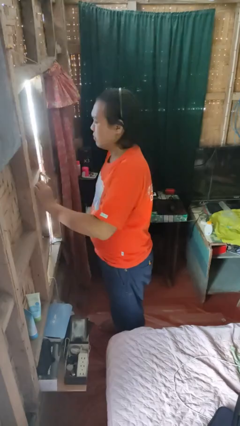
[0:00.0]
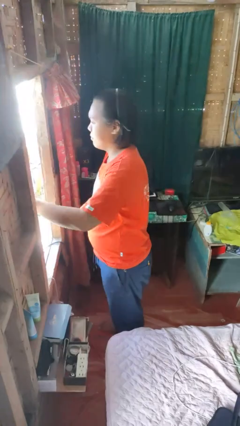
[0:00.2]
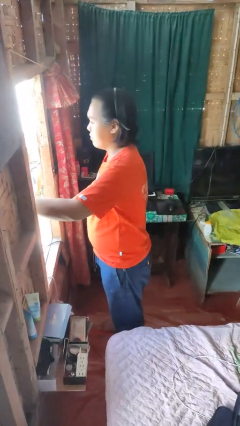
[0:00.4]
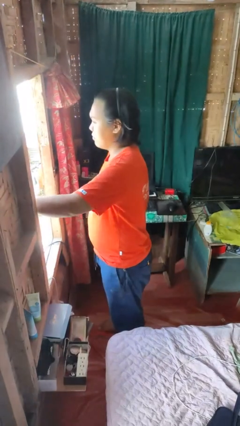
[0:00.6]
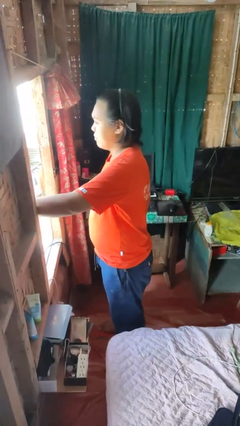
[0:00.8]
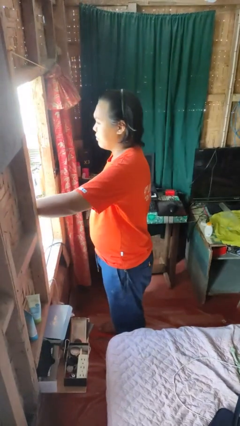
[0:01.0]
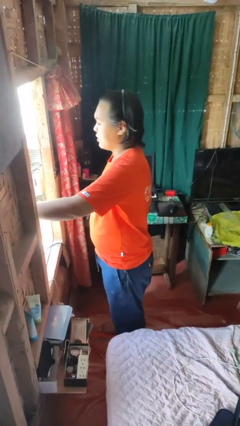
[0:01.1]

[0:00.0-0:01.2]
person opens home window

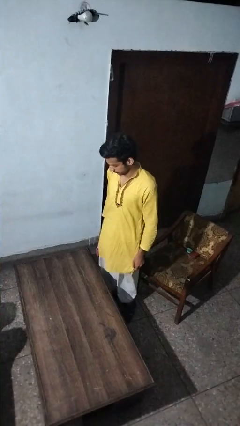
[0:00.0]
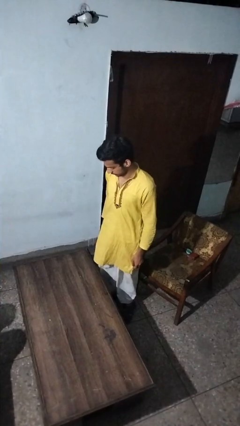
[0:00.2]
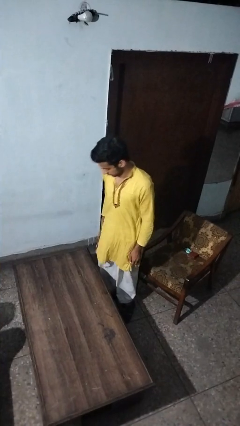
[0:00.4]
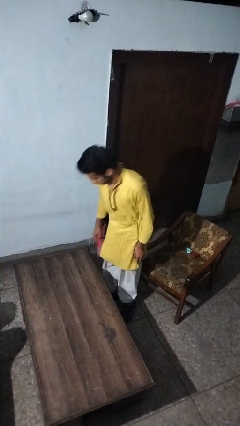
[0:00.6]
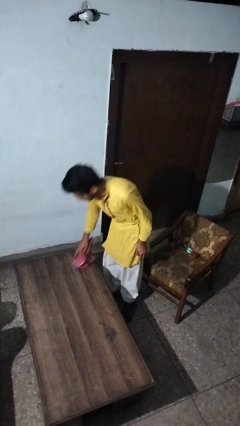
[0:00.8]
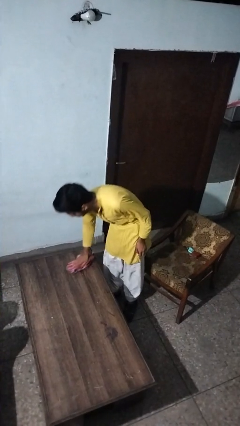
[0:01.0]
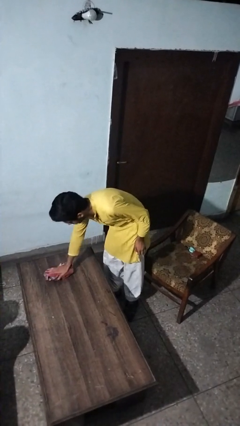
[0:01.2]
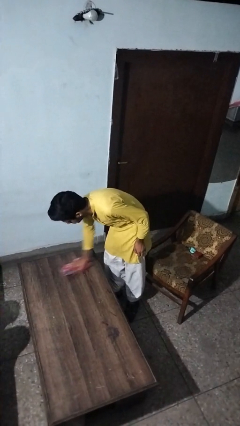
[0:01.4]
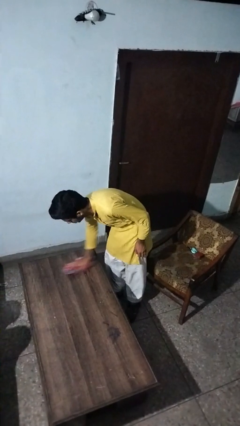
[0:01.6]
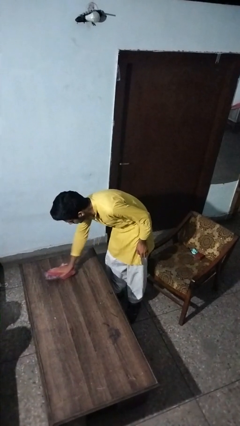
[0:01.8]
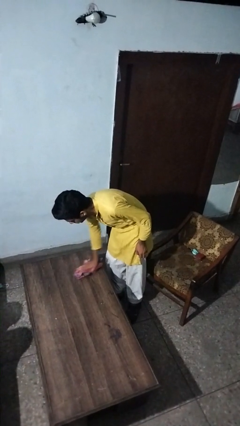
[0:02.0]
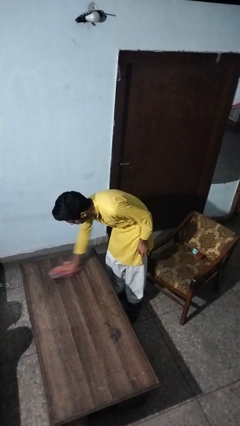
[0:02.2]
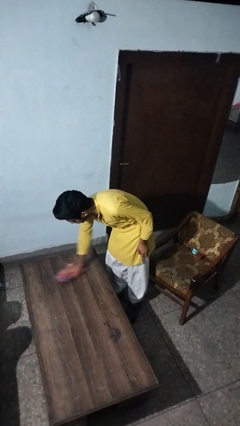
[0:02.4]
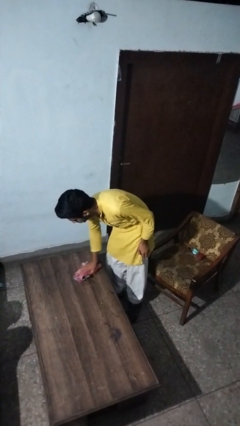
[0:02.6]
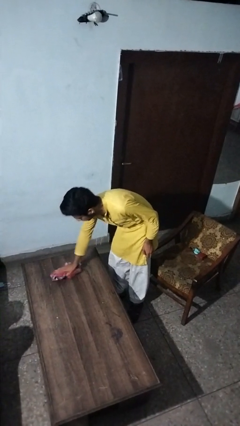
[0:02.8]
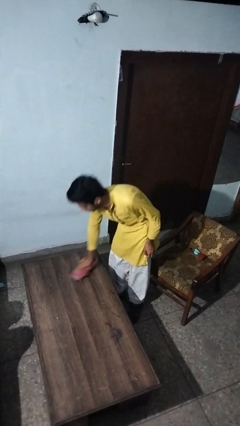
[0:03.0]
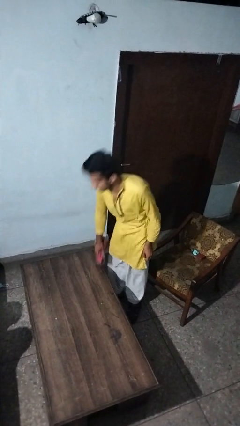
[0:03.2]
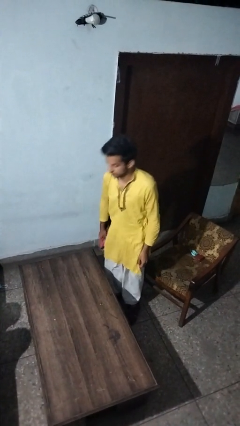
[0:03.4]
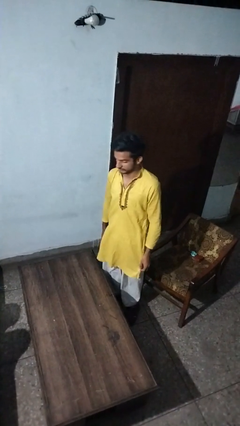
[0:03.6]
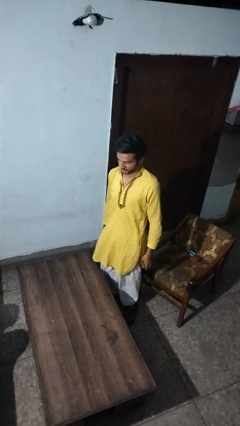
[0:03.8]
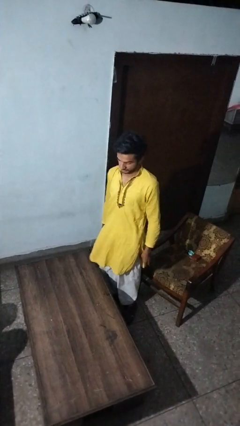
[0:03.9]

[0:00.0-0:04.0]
person cleans table with rag

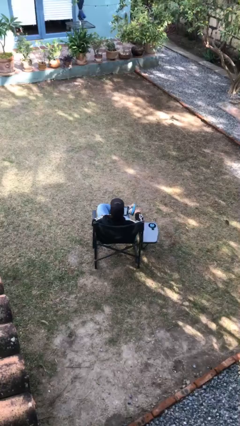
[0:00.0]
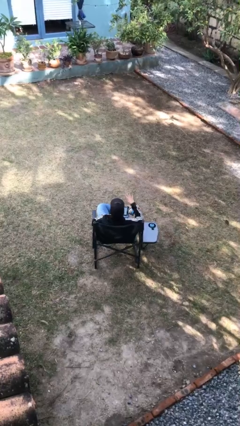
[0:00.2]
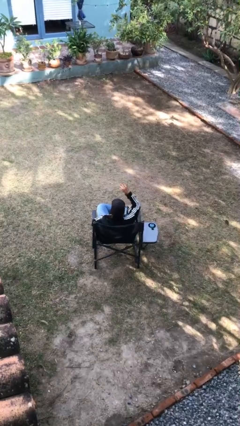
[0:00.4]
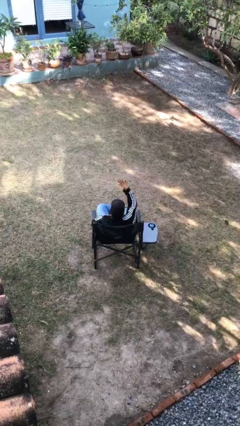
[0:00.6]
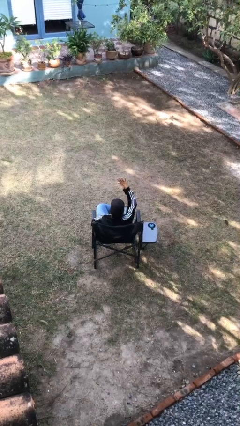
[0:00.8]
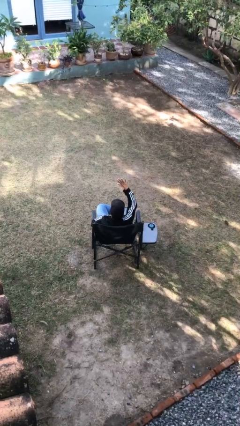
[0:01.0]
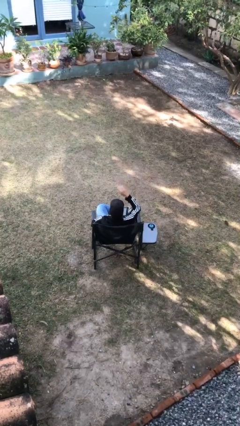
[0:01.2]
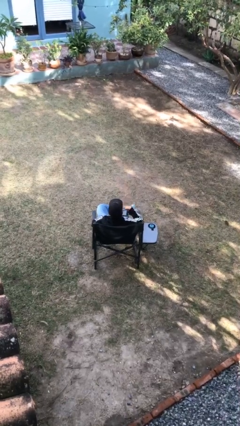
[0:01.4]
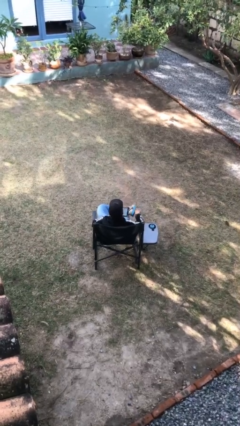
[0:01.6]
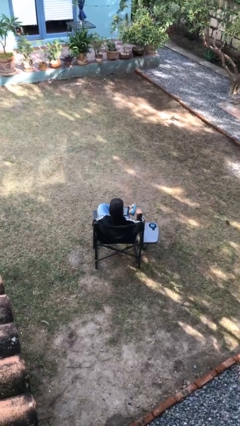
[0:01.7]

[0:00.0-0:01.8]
person gestures number five

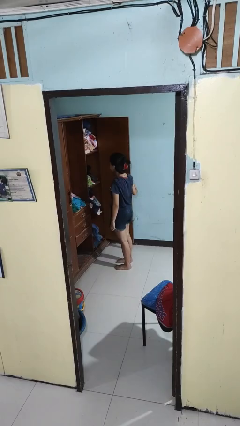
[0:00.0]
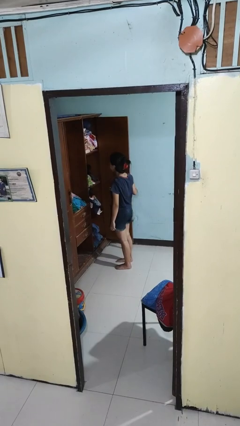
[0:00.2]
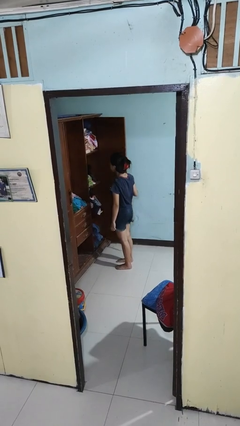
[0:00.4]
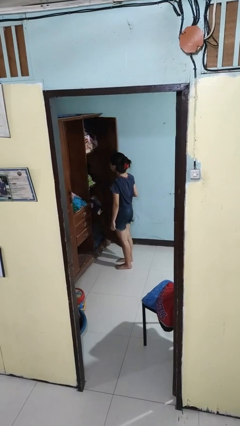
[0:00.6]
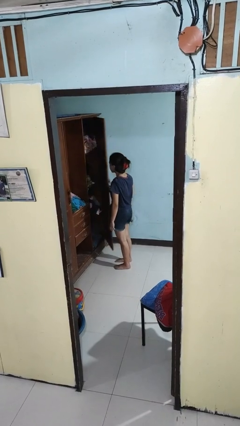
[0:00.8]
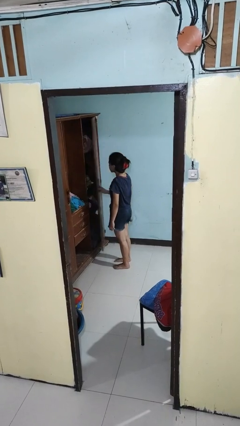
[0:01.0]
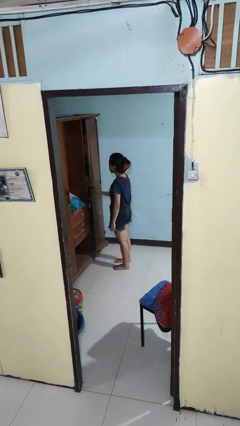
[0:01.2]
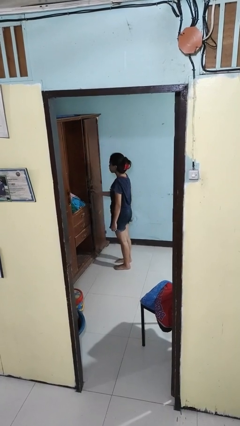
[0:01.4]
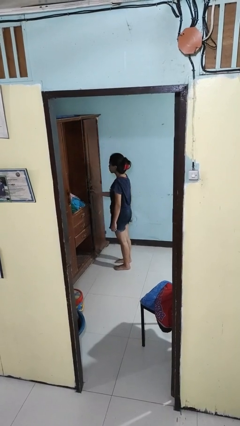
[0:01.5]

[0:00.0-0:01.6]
person closes closet door

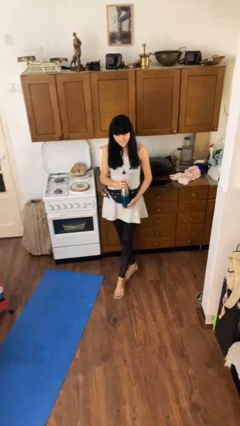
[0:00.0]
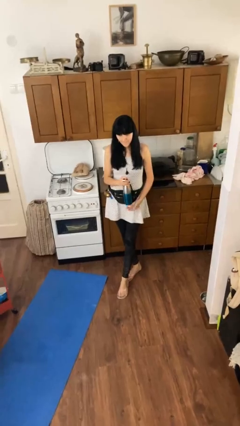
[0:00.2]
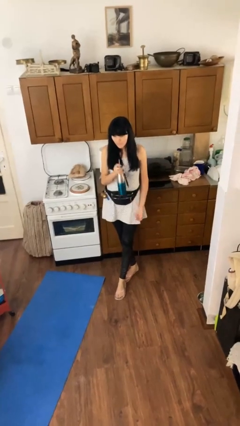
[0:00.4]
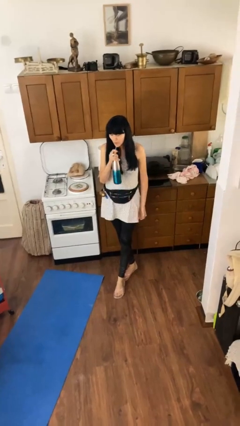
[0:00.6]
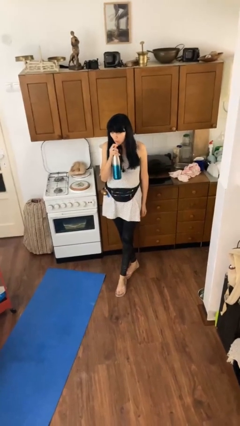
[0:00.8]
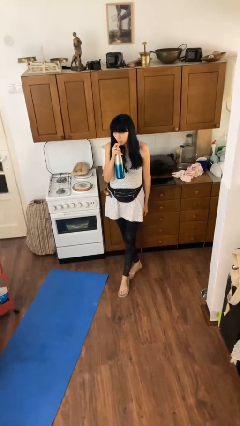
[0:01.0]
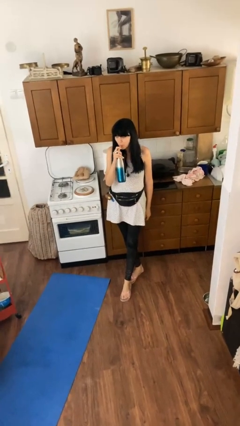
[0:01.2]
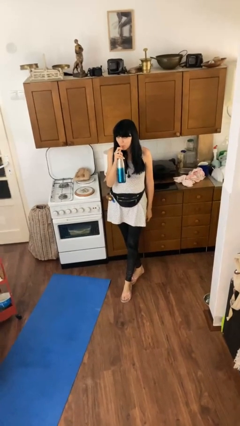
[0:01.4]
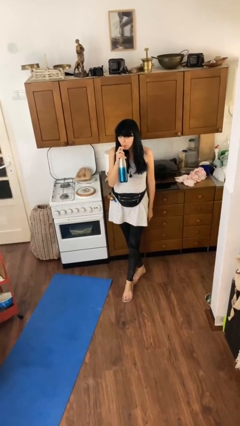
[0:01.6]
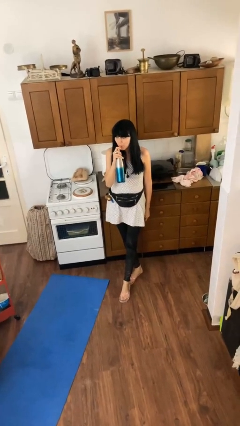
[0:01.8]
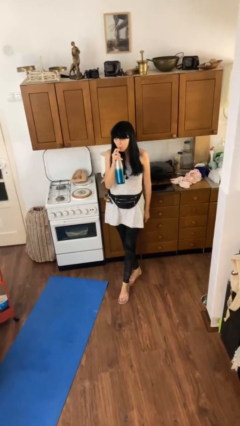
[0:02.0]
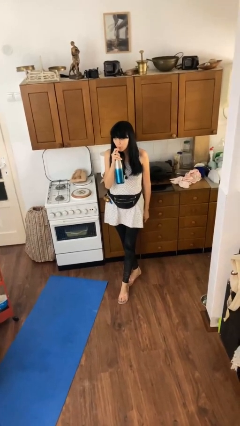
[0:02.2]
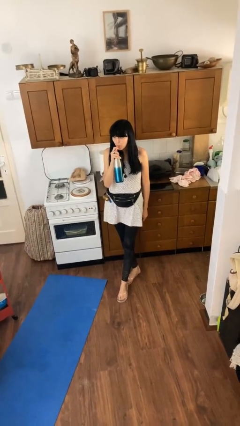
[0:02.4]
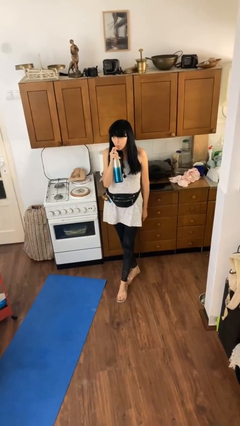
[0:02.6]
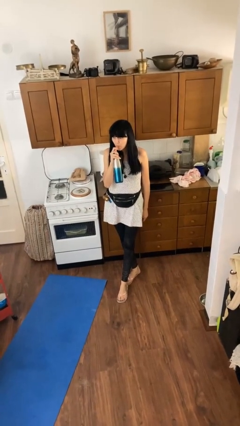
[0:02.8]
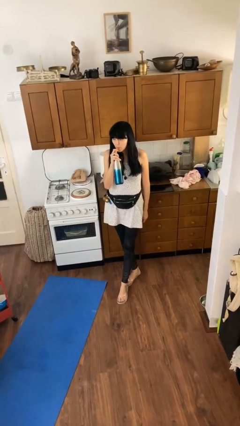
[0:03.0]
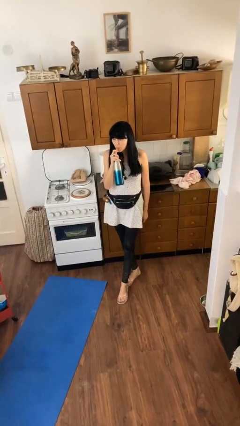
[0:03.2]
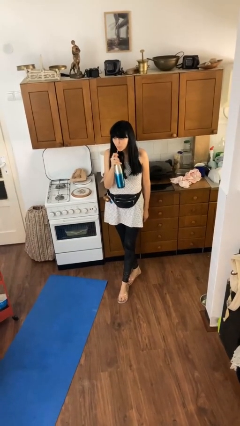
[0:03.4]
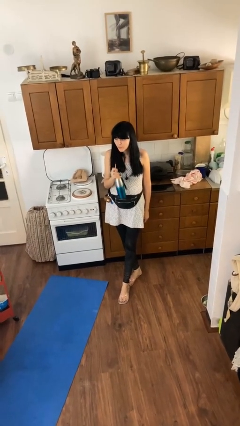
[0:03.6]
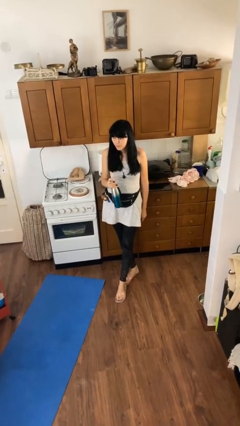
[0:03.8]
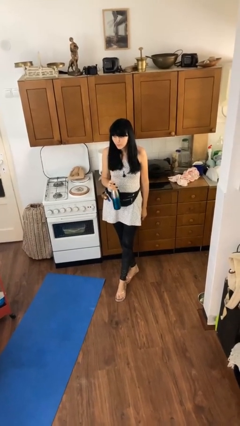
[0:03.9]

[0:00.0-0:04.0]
person drinks from straw

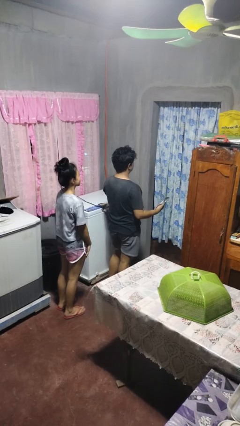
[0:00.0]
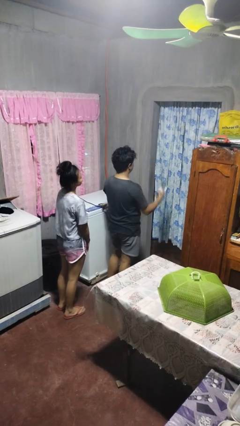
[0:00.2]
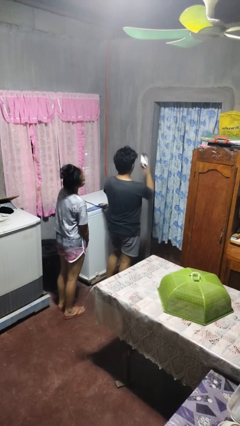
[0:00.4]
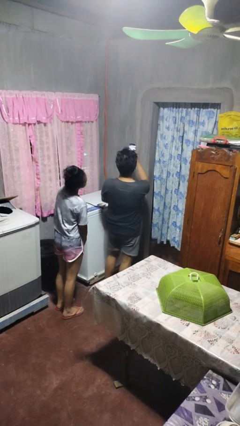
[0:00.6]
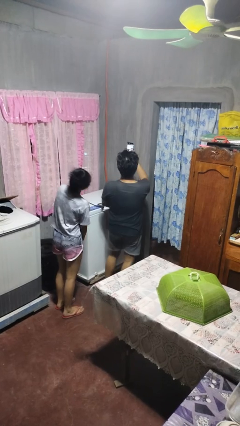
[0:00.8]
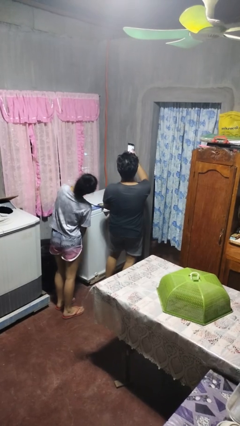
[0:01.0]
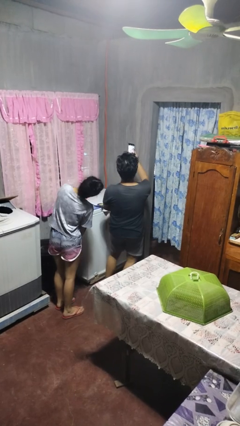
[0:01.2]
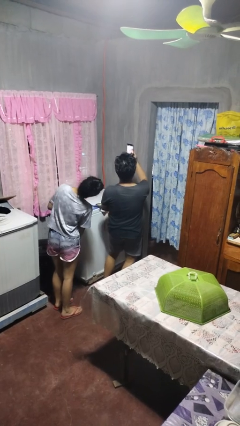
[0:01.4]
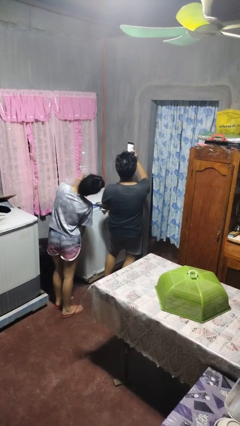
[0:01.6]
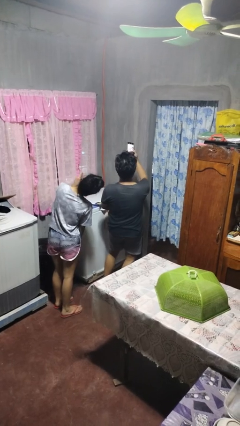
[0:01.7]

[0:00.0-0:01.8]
person takes selfie with person

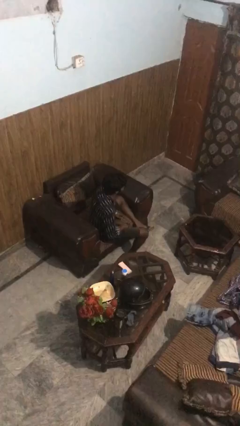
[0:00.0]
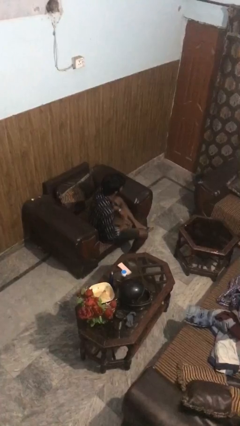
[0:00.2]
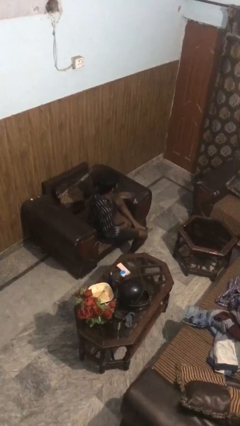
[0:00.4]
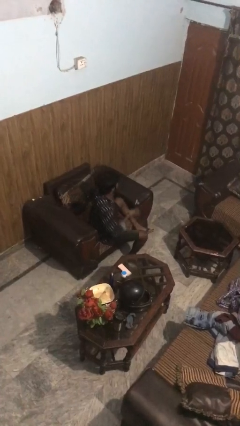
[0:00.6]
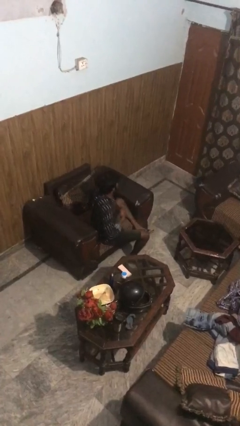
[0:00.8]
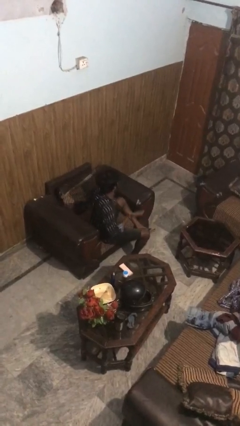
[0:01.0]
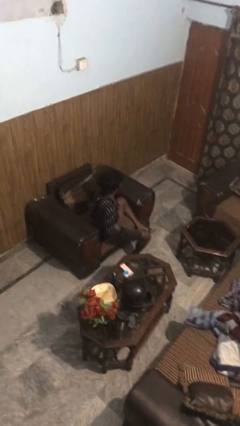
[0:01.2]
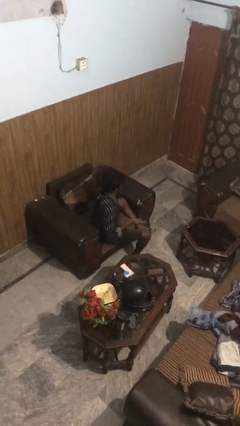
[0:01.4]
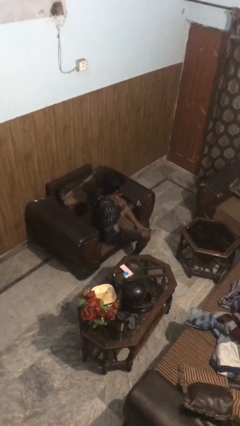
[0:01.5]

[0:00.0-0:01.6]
person drums on chest

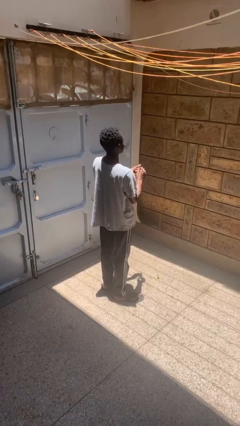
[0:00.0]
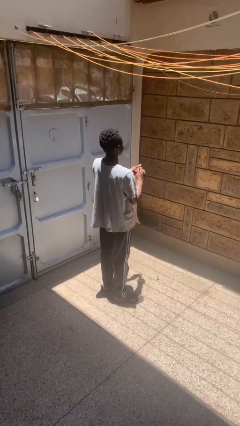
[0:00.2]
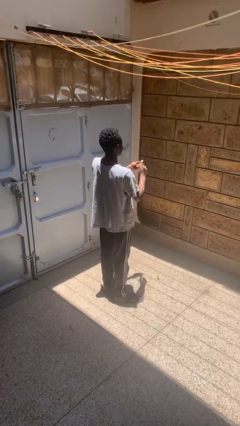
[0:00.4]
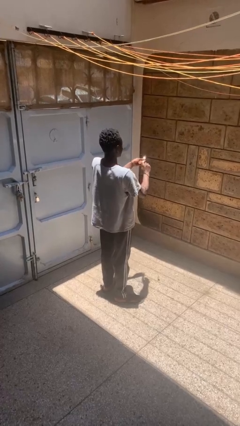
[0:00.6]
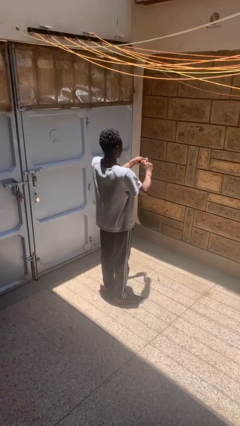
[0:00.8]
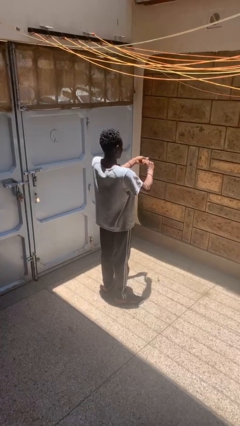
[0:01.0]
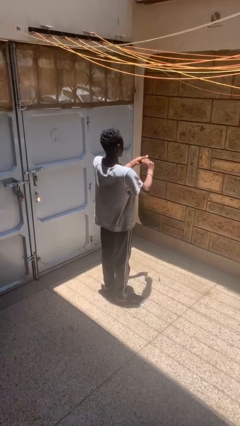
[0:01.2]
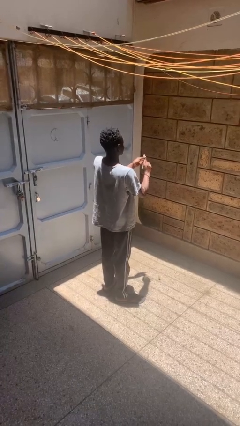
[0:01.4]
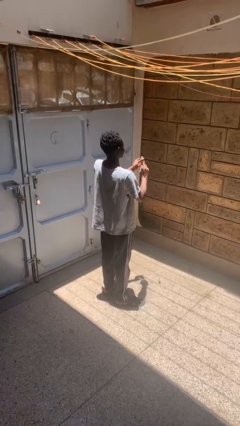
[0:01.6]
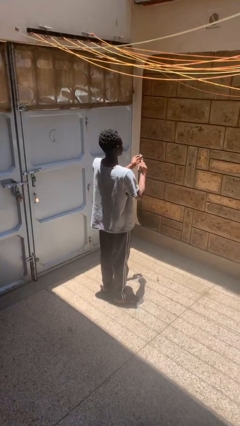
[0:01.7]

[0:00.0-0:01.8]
person clips fingernails
